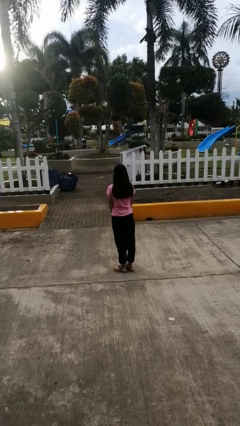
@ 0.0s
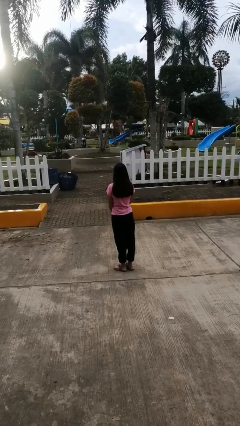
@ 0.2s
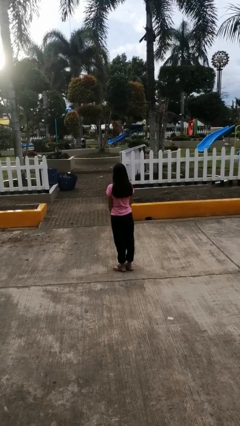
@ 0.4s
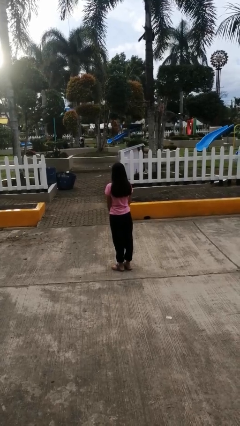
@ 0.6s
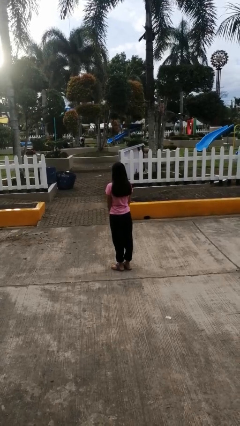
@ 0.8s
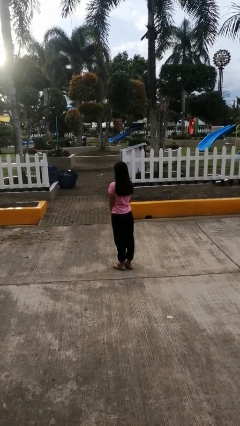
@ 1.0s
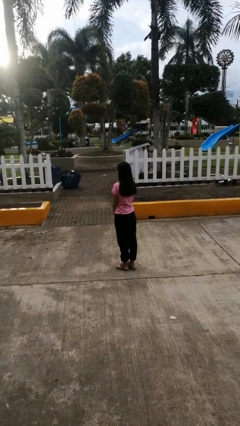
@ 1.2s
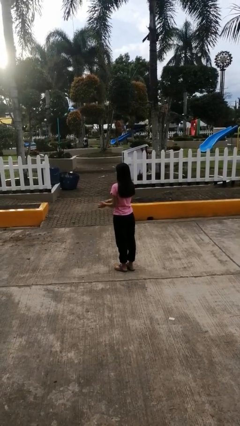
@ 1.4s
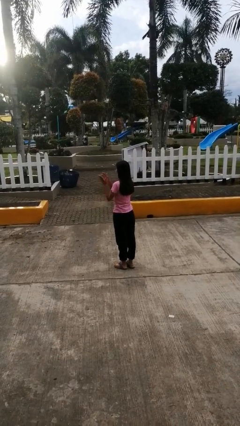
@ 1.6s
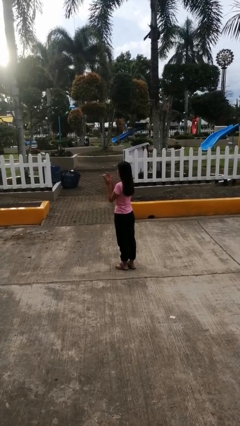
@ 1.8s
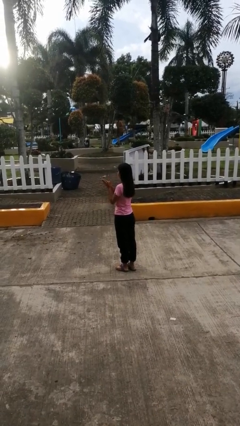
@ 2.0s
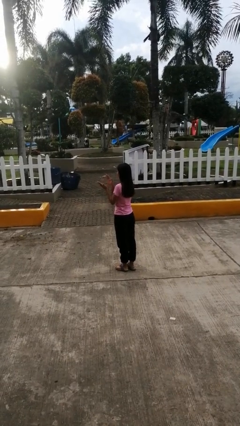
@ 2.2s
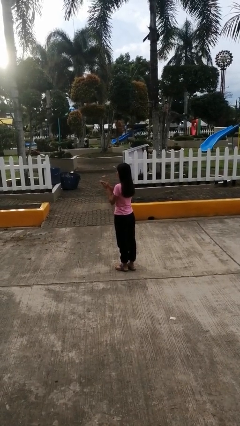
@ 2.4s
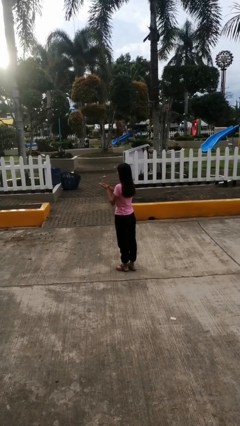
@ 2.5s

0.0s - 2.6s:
person claps hands

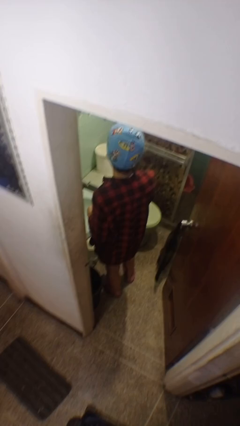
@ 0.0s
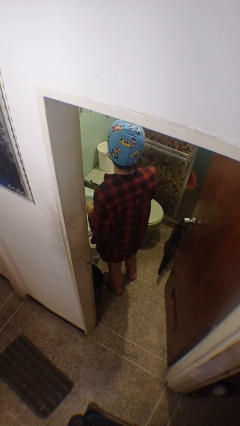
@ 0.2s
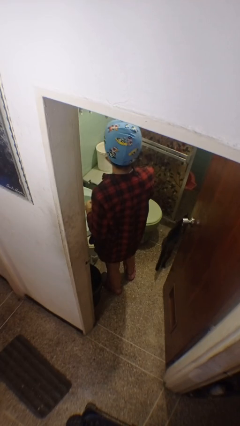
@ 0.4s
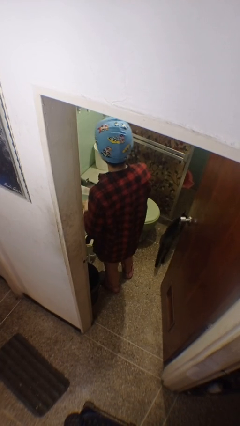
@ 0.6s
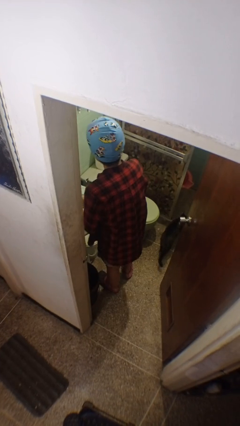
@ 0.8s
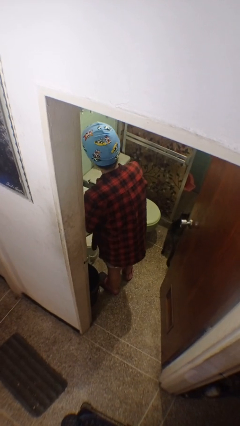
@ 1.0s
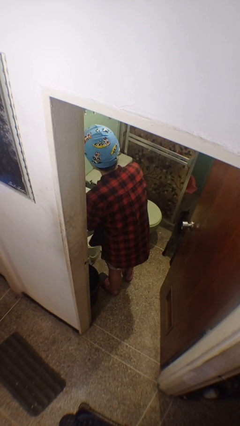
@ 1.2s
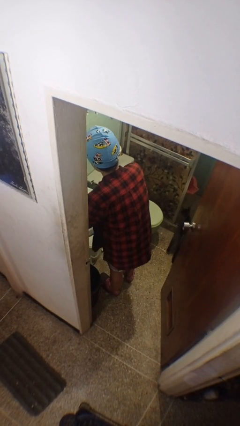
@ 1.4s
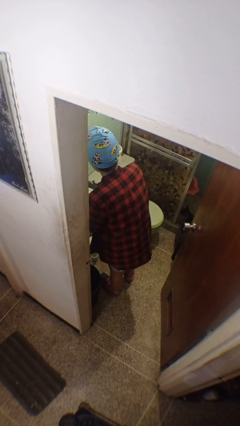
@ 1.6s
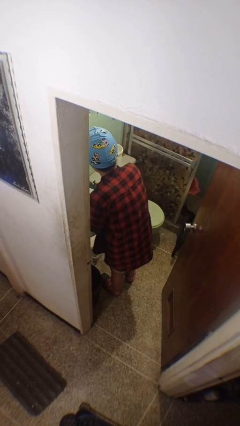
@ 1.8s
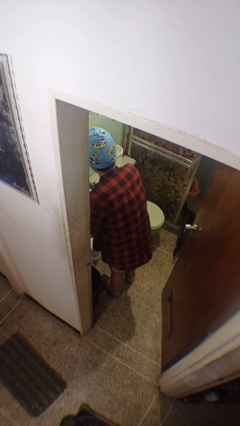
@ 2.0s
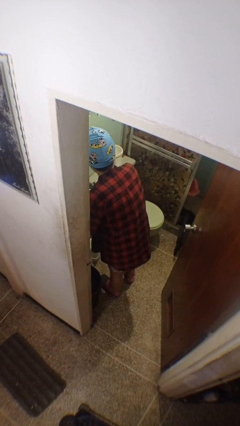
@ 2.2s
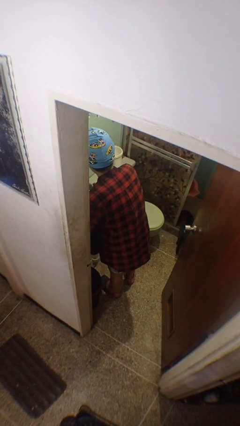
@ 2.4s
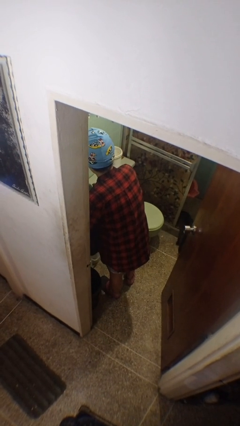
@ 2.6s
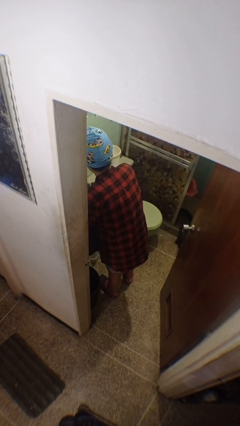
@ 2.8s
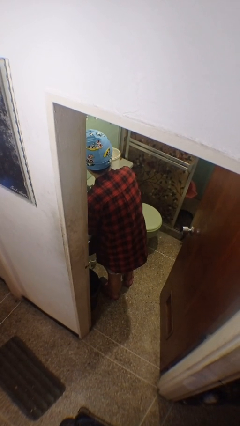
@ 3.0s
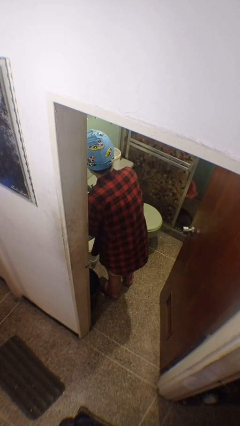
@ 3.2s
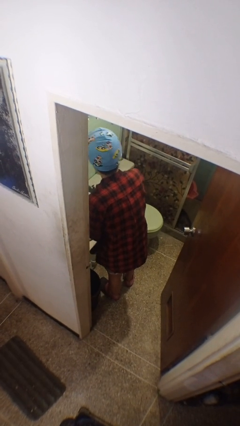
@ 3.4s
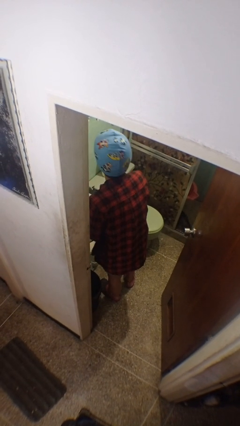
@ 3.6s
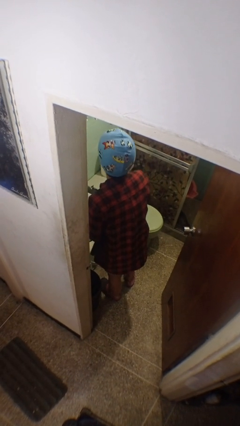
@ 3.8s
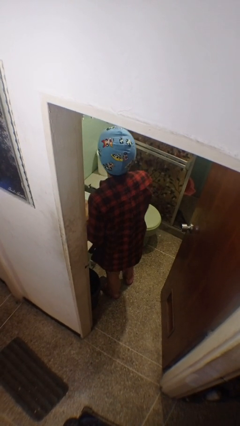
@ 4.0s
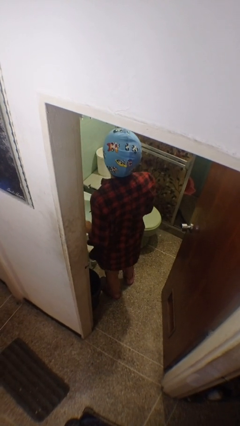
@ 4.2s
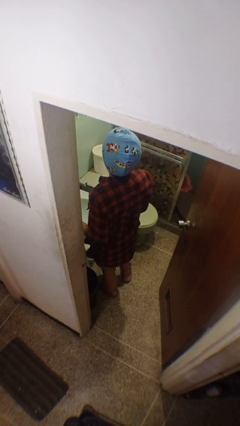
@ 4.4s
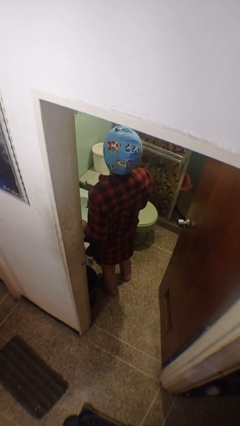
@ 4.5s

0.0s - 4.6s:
person washes hands

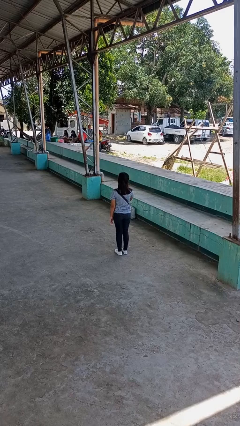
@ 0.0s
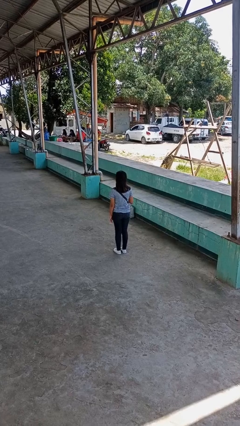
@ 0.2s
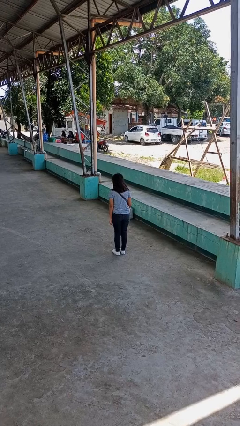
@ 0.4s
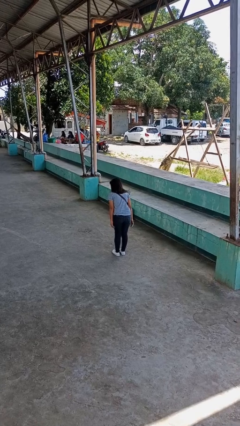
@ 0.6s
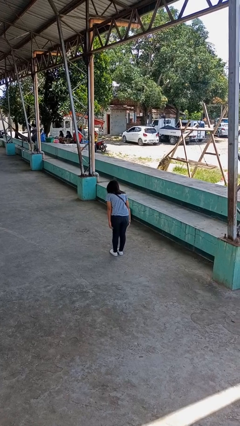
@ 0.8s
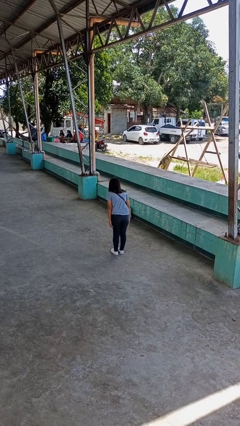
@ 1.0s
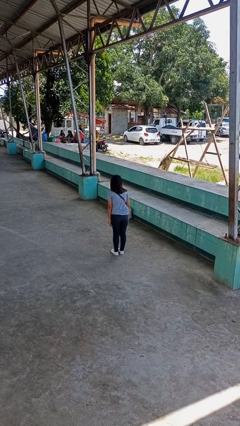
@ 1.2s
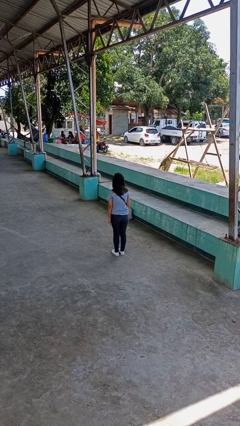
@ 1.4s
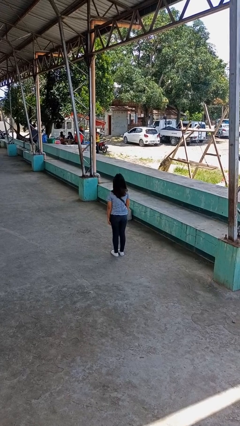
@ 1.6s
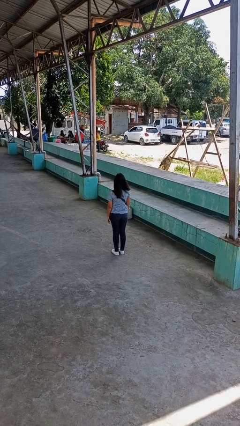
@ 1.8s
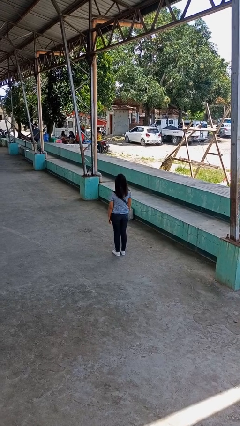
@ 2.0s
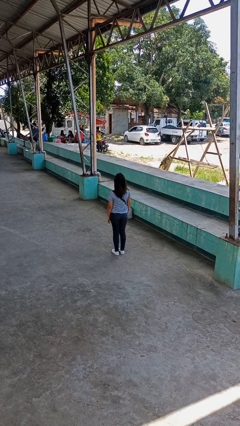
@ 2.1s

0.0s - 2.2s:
person bows

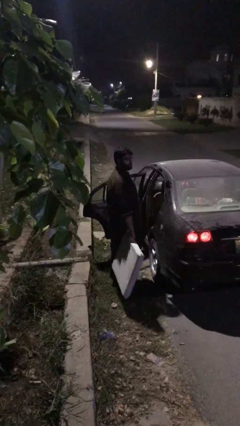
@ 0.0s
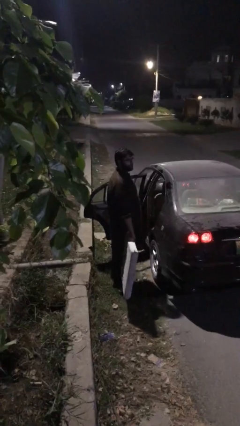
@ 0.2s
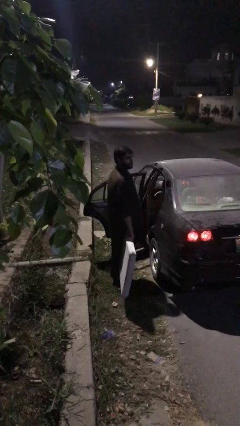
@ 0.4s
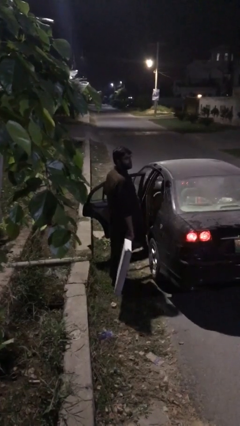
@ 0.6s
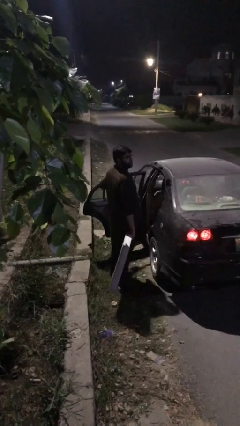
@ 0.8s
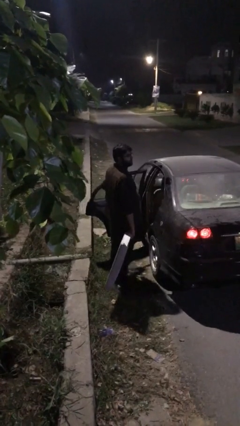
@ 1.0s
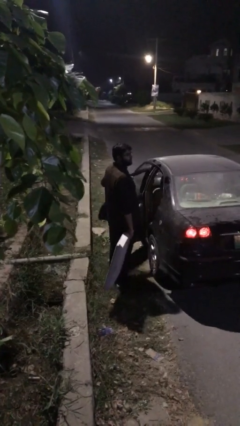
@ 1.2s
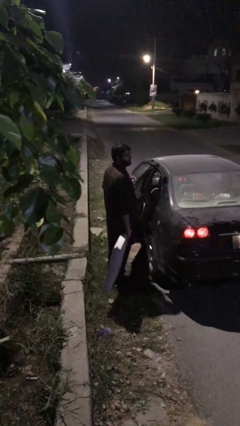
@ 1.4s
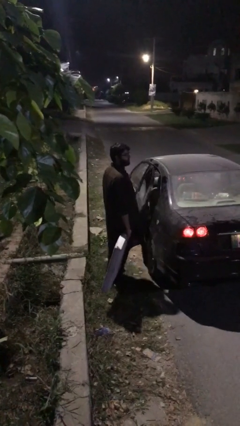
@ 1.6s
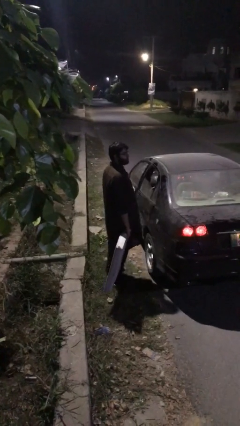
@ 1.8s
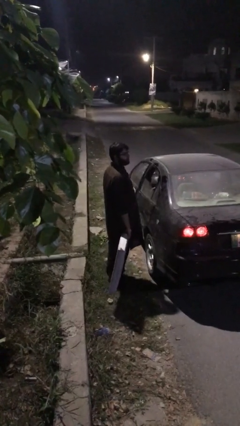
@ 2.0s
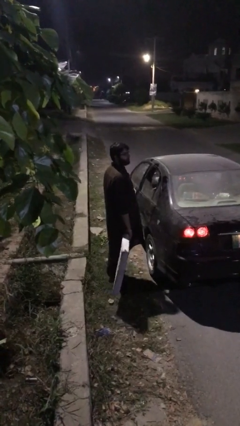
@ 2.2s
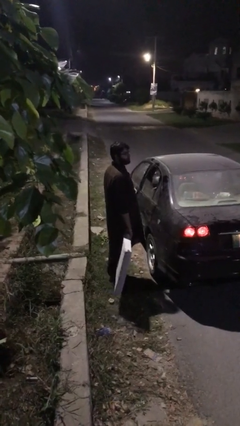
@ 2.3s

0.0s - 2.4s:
person closes car door

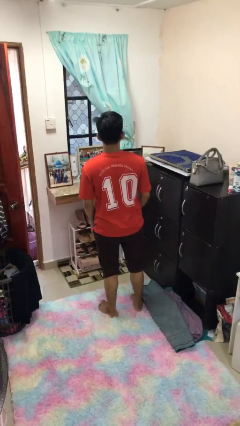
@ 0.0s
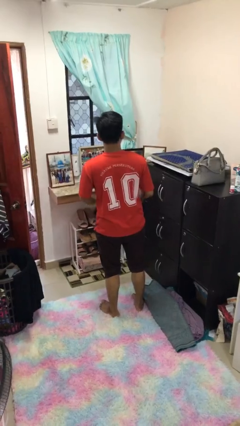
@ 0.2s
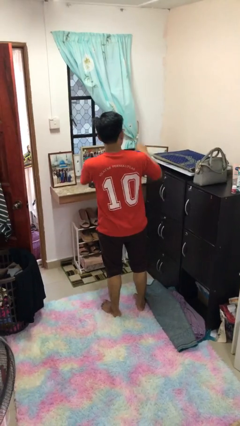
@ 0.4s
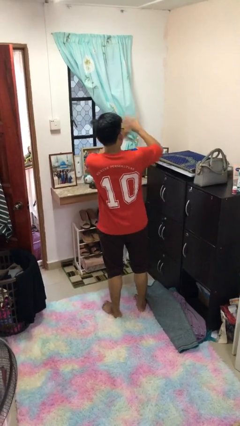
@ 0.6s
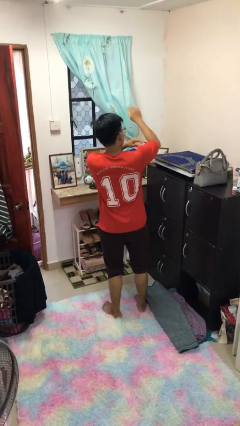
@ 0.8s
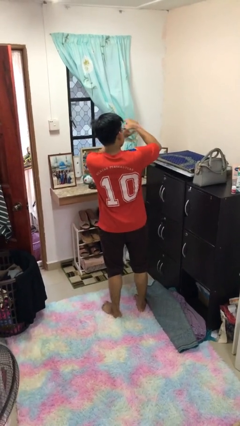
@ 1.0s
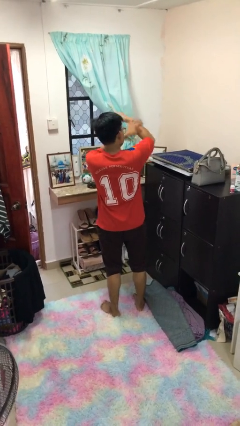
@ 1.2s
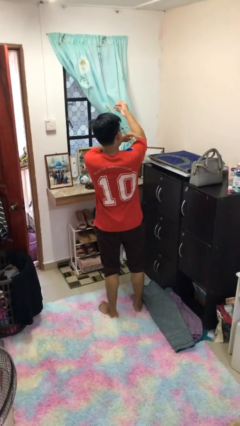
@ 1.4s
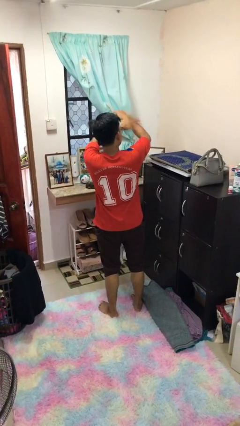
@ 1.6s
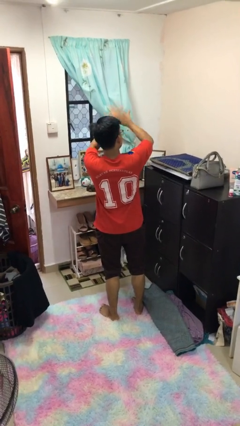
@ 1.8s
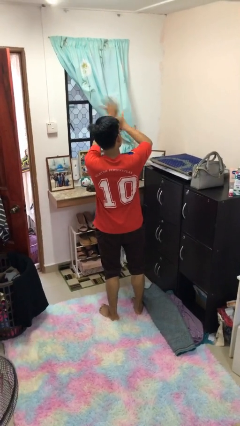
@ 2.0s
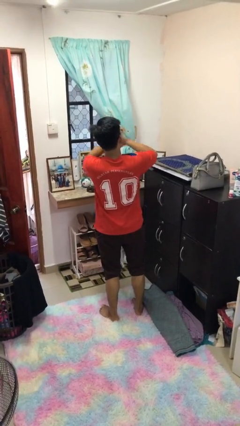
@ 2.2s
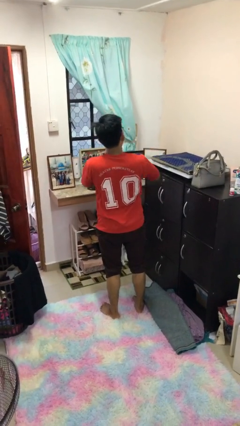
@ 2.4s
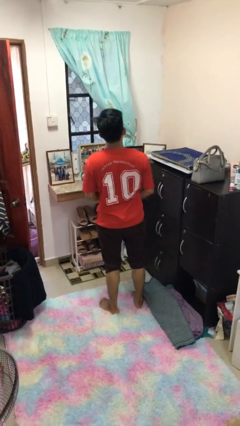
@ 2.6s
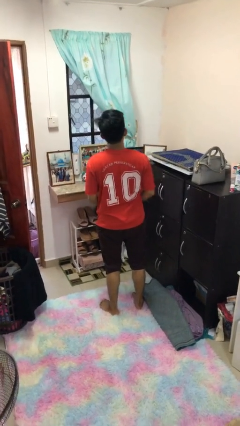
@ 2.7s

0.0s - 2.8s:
person swats bug

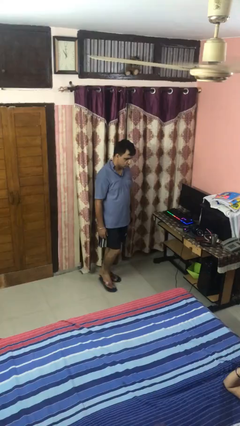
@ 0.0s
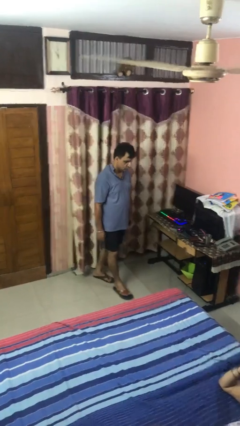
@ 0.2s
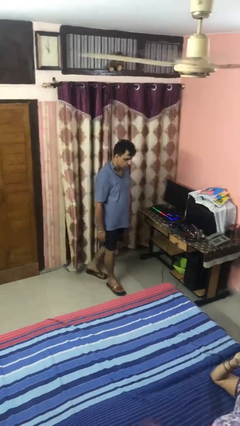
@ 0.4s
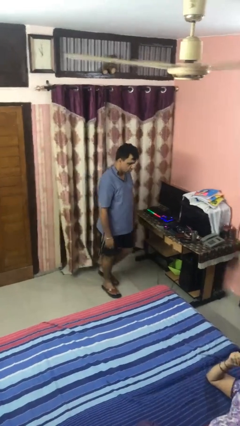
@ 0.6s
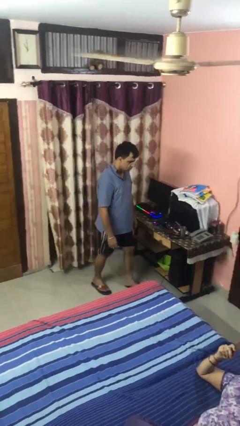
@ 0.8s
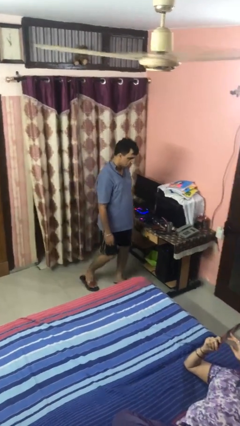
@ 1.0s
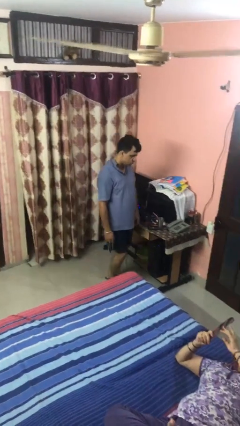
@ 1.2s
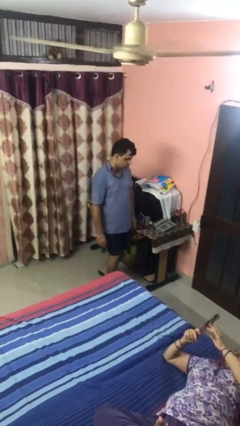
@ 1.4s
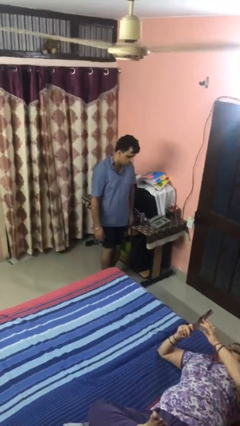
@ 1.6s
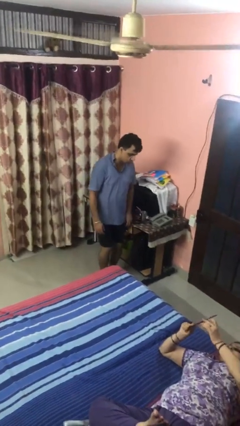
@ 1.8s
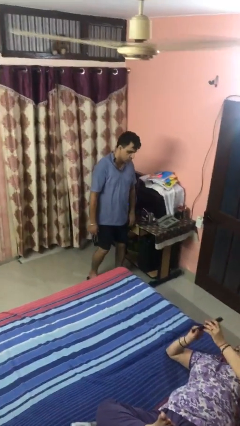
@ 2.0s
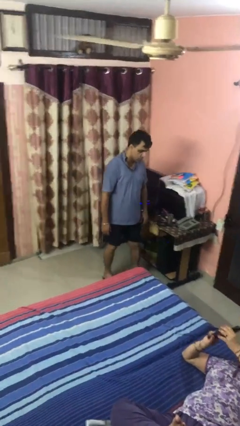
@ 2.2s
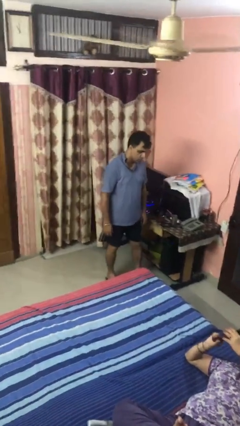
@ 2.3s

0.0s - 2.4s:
person bumps into table

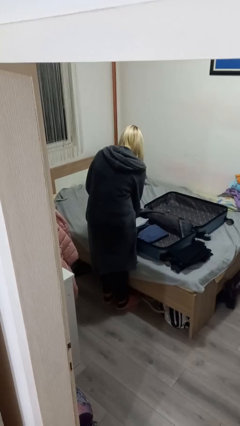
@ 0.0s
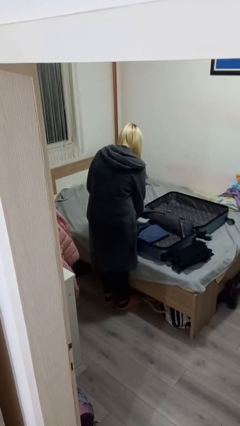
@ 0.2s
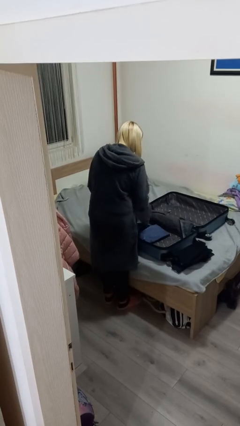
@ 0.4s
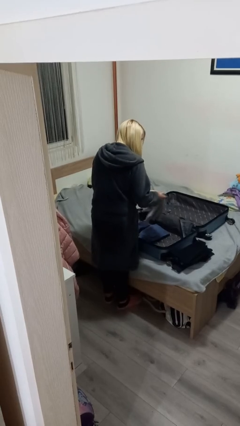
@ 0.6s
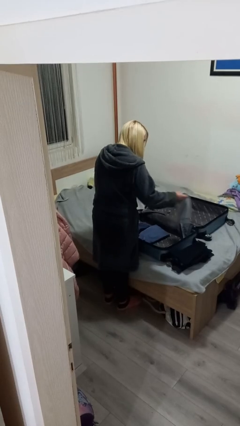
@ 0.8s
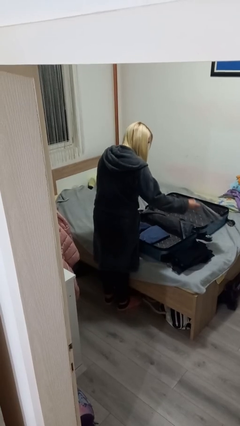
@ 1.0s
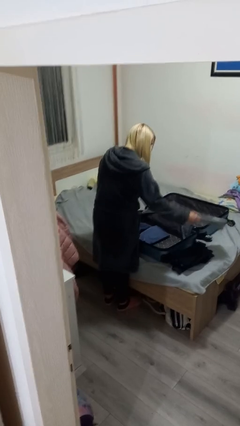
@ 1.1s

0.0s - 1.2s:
person unloads clothes from suitcase
